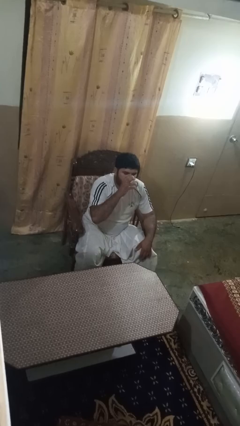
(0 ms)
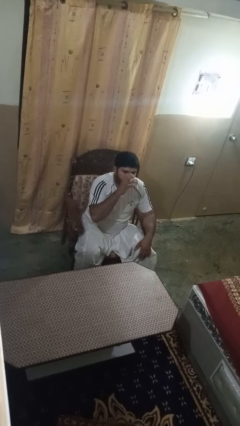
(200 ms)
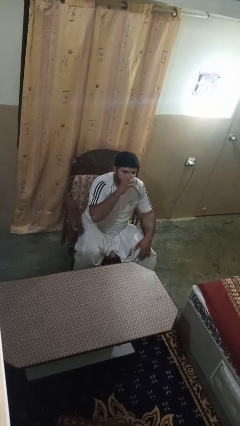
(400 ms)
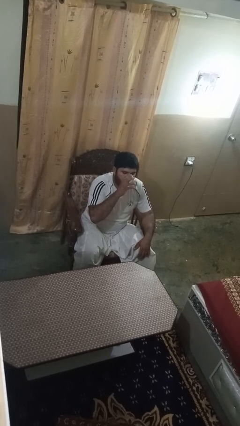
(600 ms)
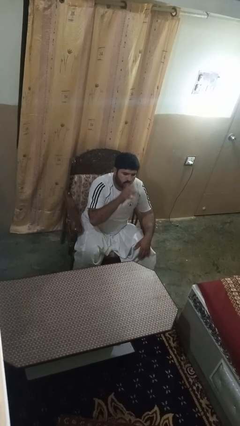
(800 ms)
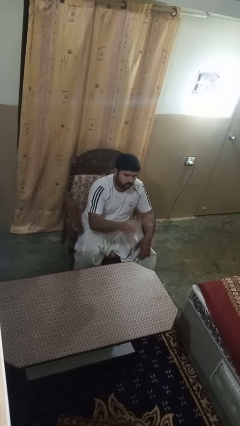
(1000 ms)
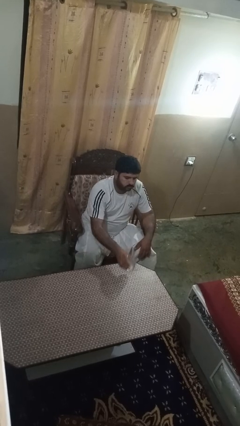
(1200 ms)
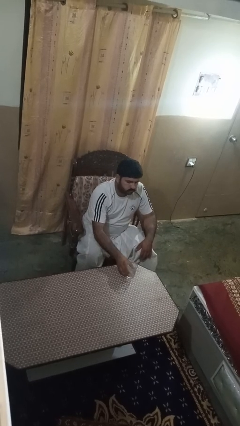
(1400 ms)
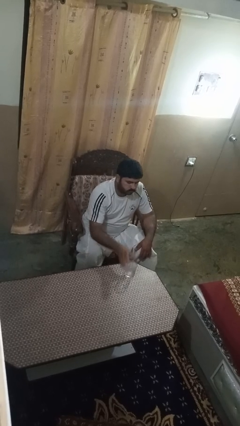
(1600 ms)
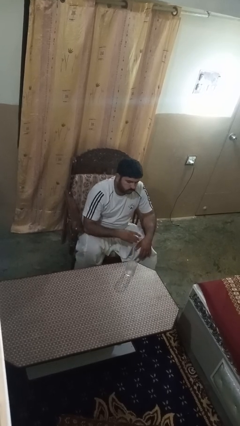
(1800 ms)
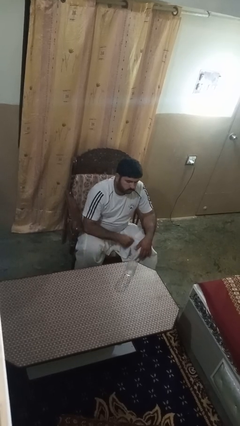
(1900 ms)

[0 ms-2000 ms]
person puts down object on table

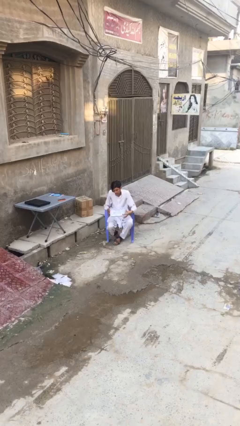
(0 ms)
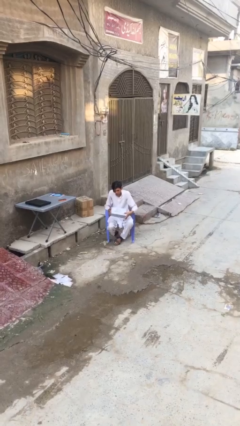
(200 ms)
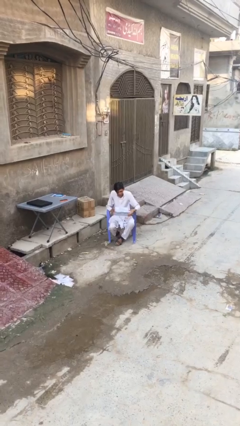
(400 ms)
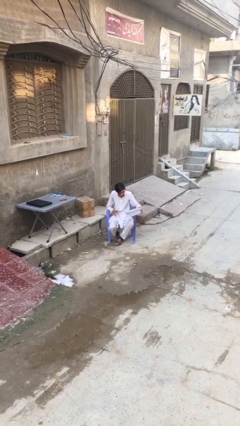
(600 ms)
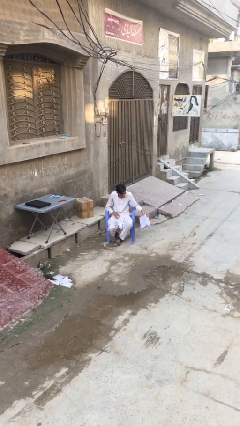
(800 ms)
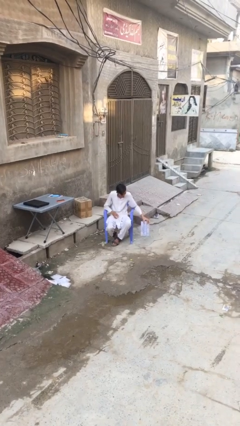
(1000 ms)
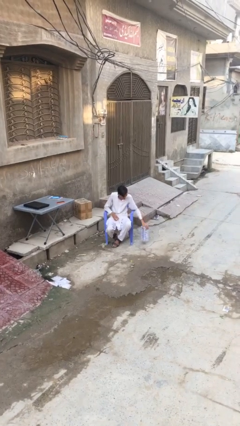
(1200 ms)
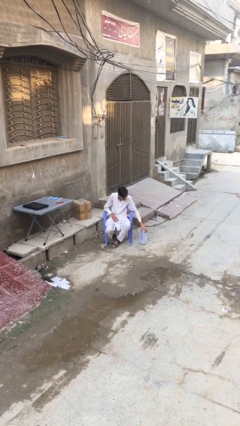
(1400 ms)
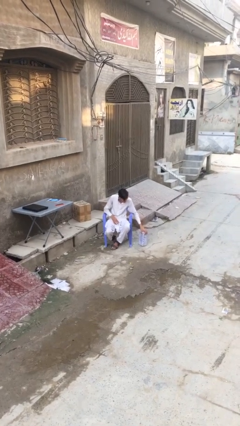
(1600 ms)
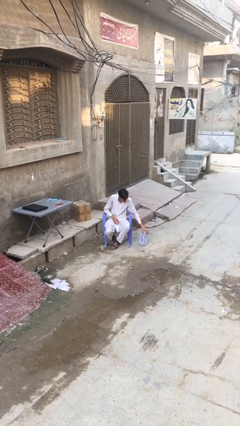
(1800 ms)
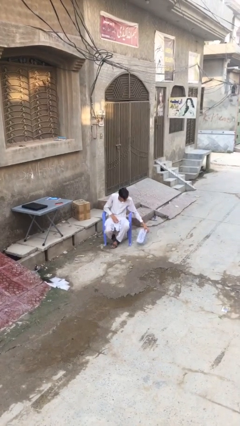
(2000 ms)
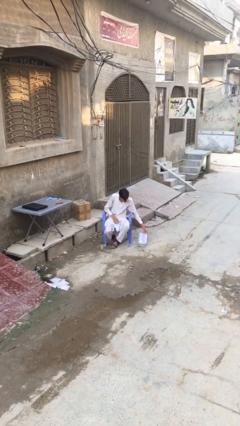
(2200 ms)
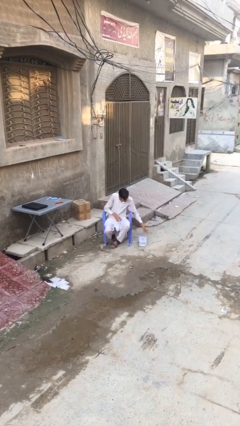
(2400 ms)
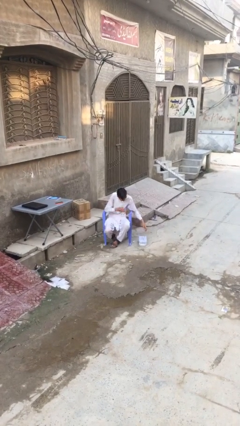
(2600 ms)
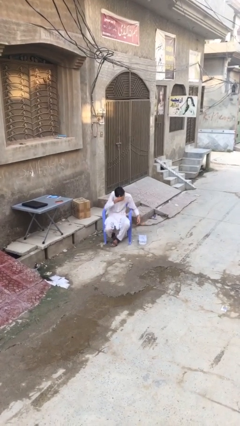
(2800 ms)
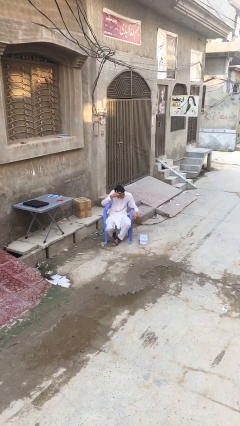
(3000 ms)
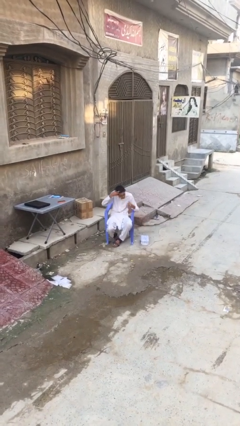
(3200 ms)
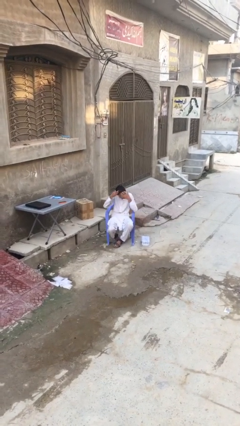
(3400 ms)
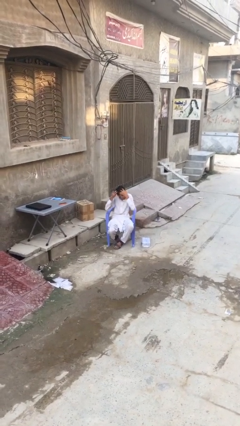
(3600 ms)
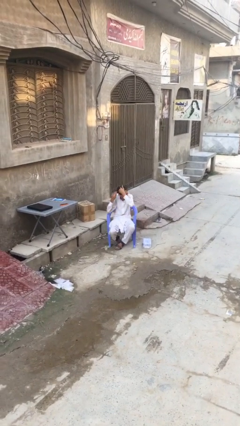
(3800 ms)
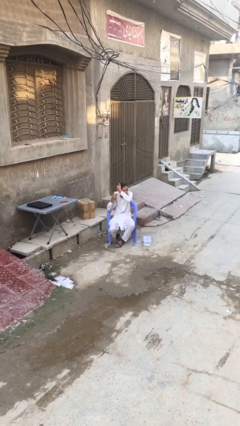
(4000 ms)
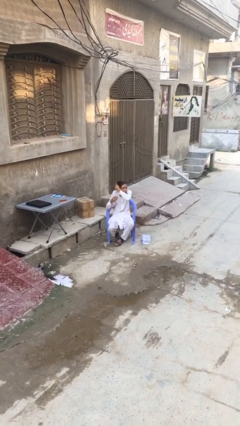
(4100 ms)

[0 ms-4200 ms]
person puts down object on floor

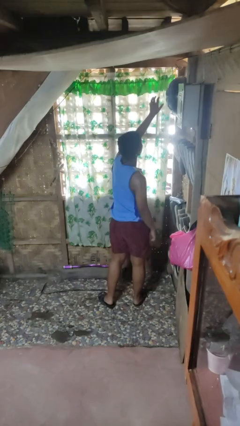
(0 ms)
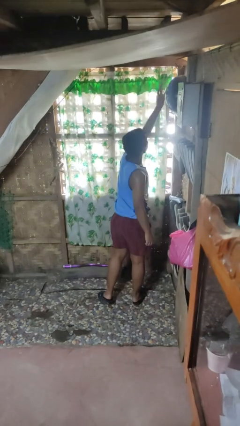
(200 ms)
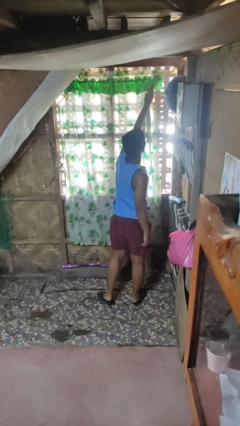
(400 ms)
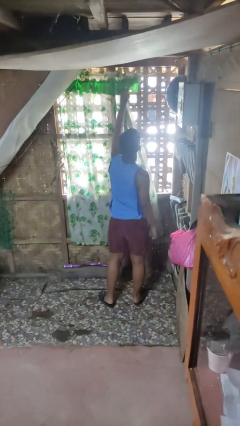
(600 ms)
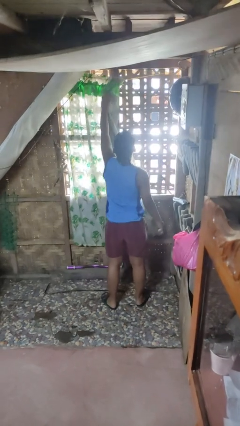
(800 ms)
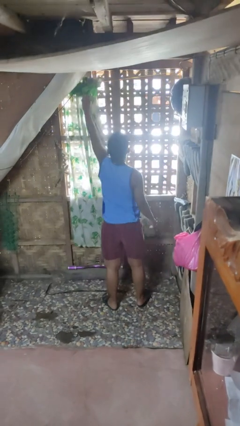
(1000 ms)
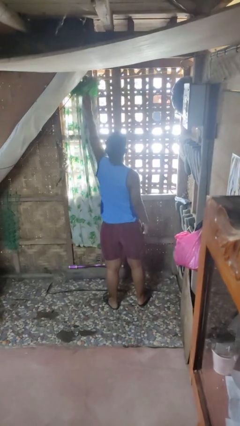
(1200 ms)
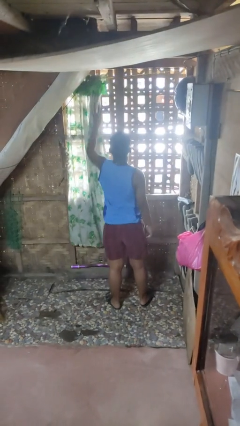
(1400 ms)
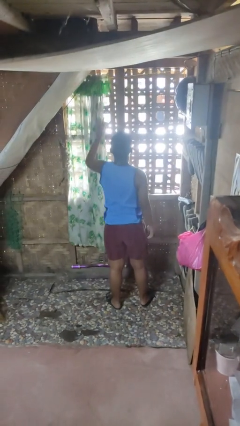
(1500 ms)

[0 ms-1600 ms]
person opens curtains

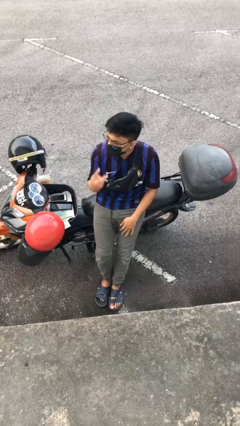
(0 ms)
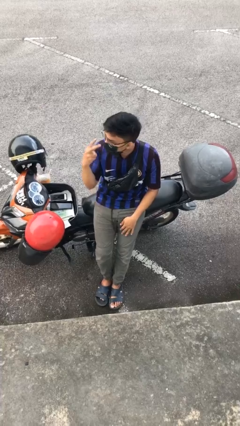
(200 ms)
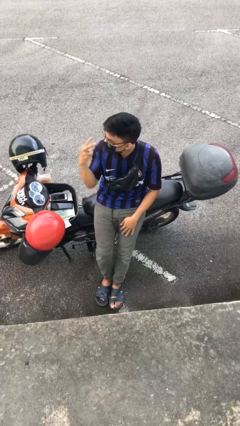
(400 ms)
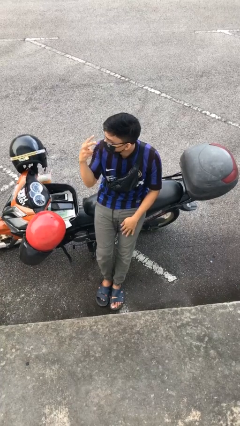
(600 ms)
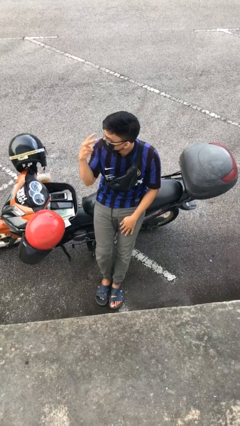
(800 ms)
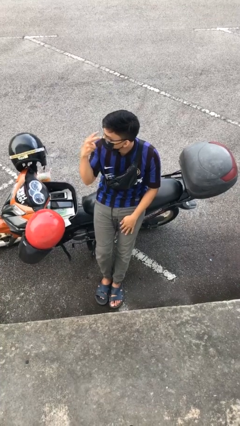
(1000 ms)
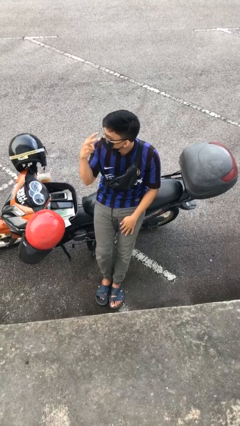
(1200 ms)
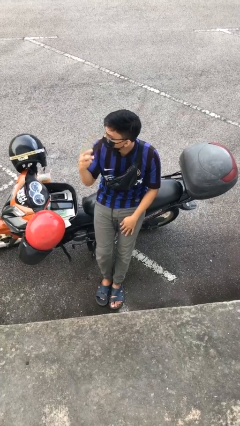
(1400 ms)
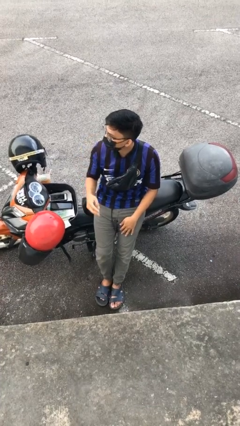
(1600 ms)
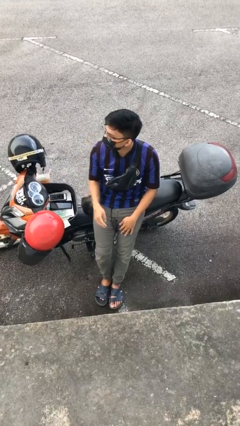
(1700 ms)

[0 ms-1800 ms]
person gestures watch closely

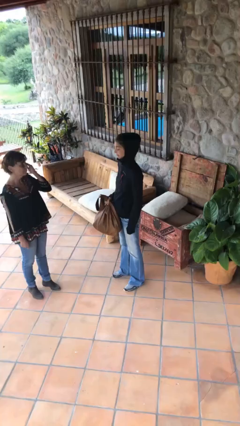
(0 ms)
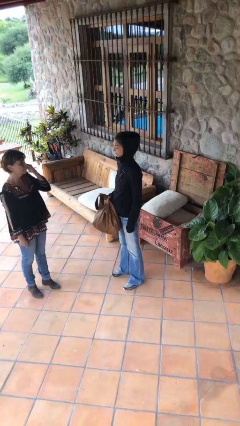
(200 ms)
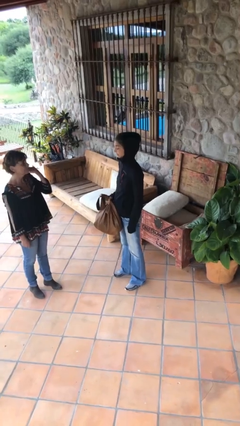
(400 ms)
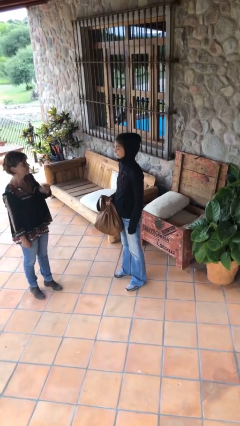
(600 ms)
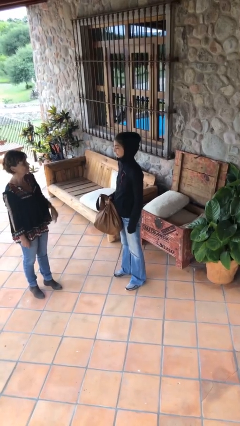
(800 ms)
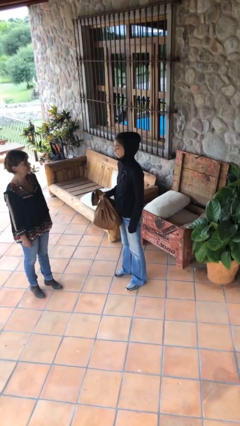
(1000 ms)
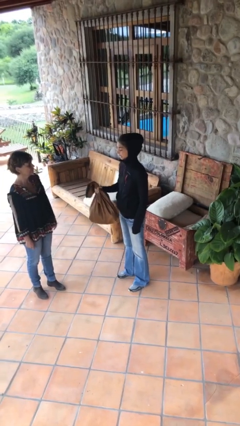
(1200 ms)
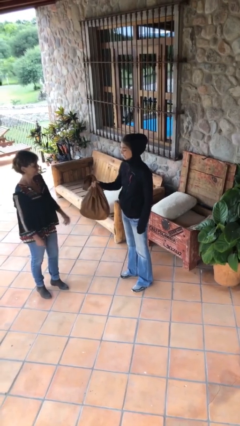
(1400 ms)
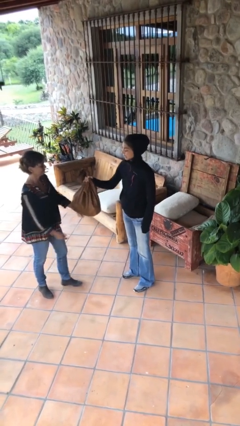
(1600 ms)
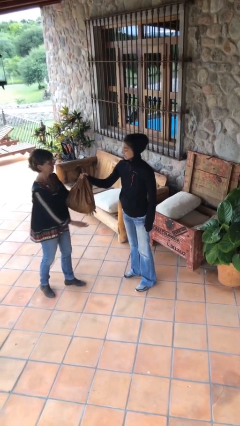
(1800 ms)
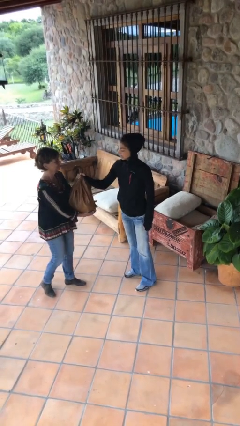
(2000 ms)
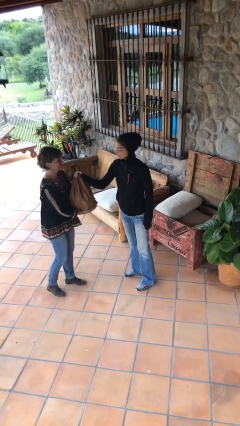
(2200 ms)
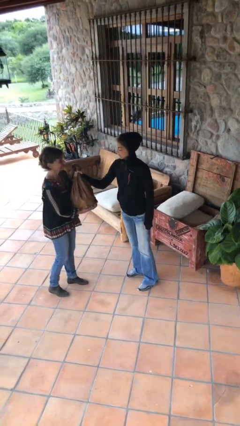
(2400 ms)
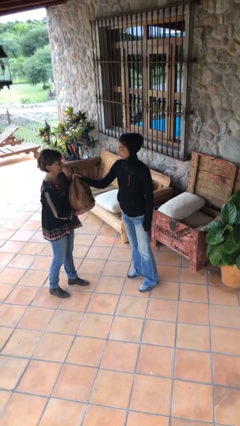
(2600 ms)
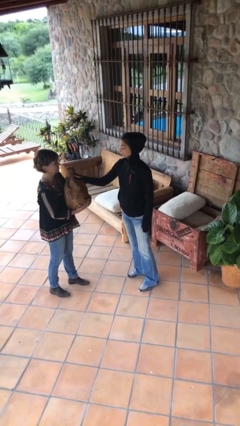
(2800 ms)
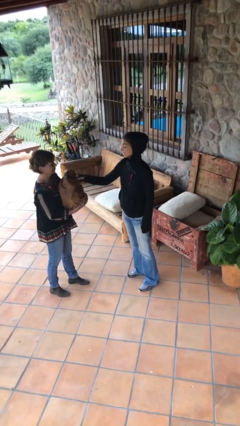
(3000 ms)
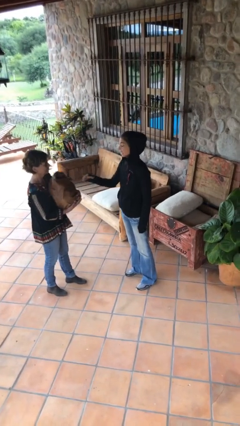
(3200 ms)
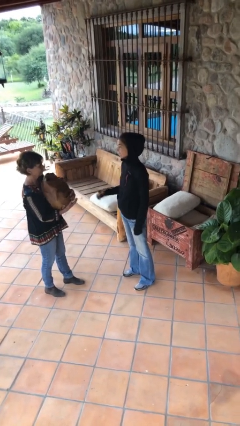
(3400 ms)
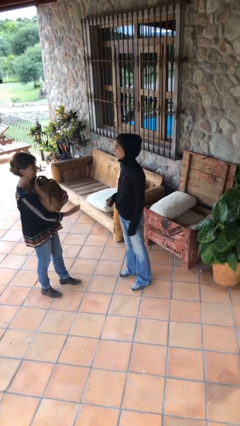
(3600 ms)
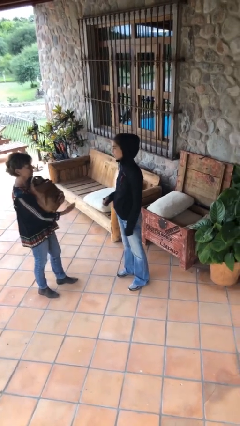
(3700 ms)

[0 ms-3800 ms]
person transfers object to person

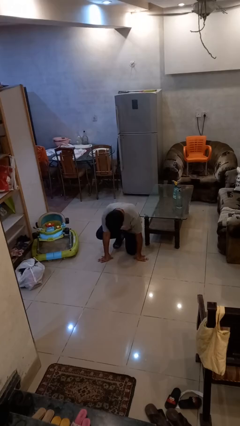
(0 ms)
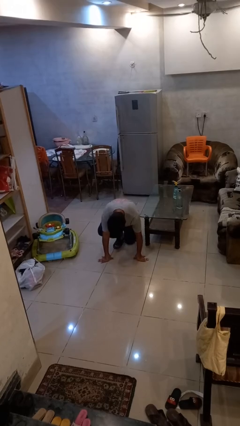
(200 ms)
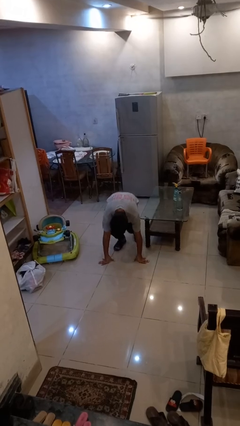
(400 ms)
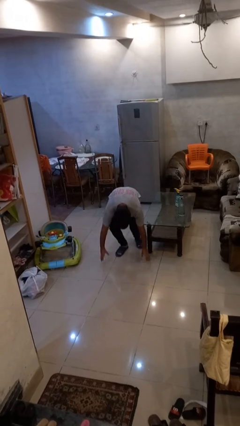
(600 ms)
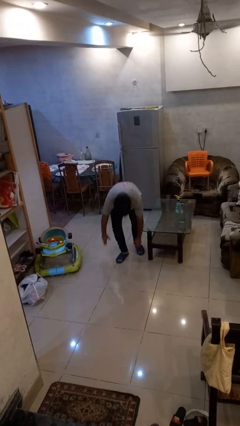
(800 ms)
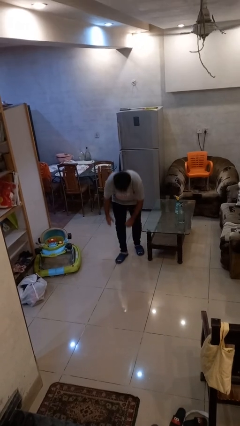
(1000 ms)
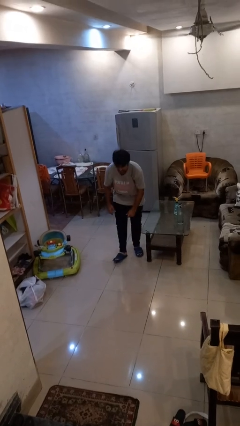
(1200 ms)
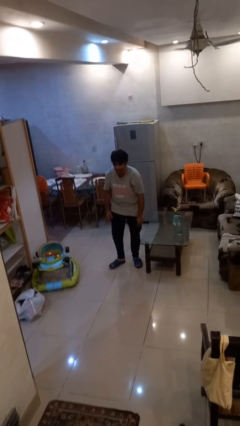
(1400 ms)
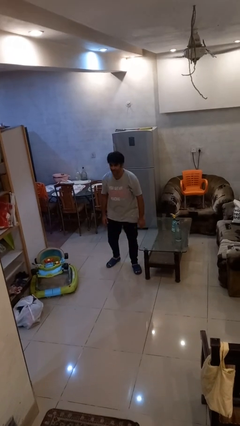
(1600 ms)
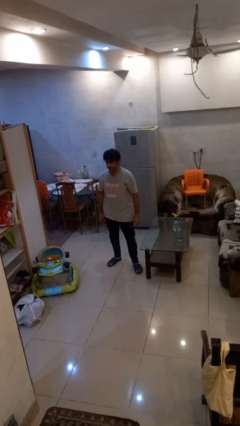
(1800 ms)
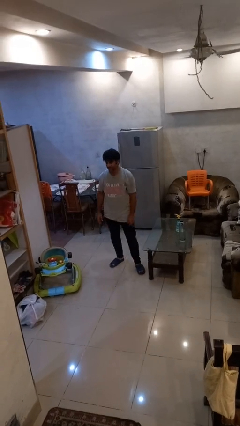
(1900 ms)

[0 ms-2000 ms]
person stands up from floor

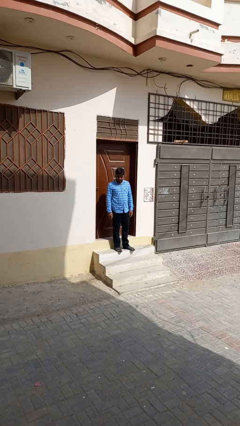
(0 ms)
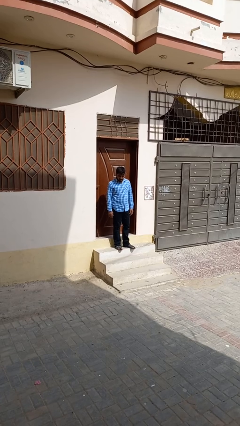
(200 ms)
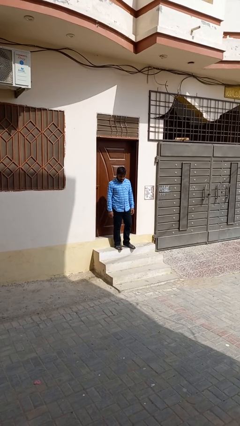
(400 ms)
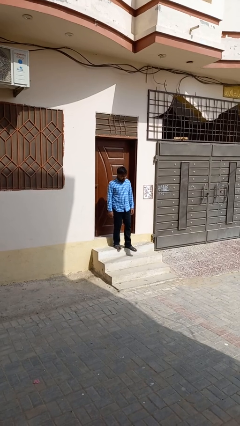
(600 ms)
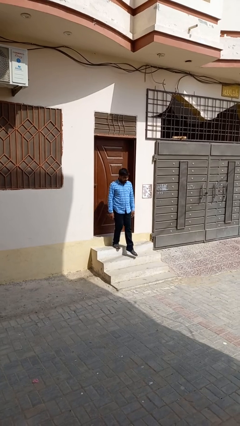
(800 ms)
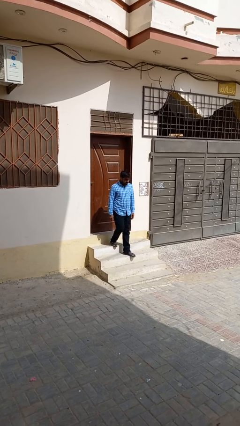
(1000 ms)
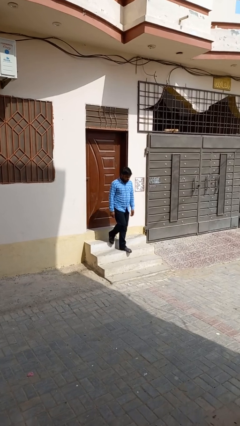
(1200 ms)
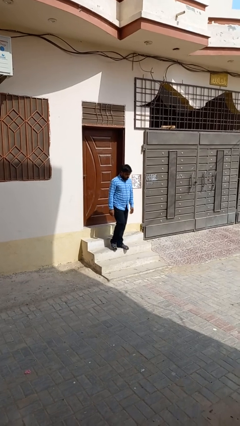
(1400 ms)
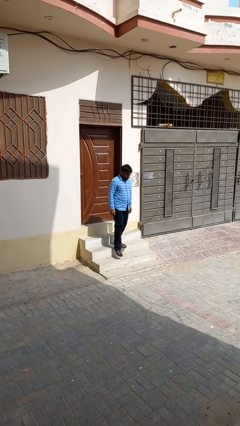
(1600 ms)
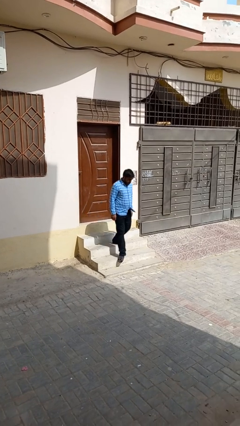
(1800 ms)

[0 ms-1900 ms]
person climbs down stairs
